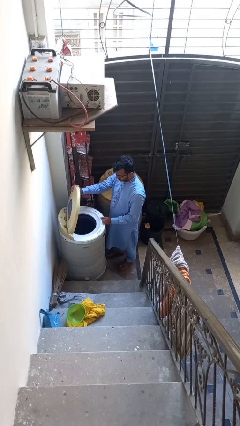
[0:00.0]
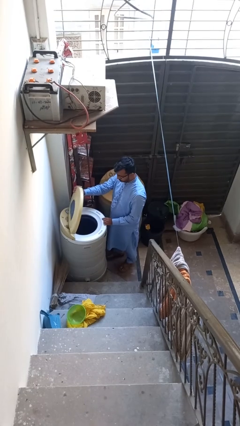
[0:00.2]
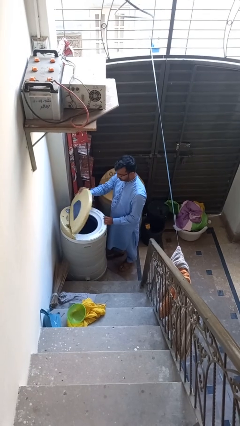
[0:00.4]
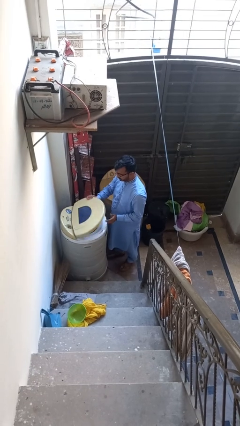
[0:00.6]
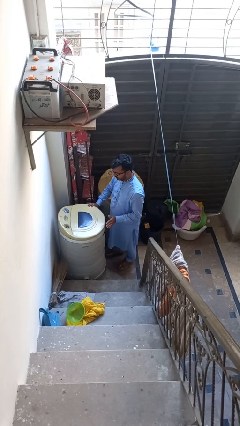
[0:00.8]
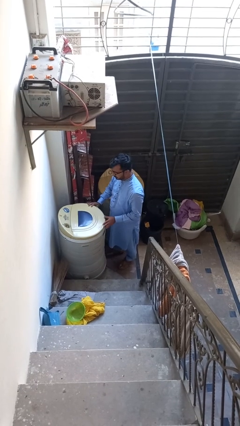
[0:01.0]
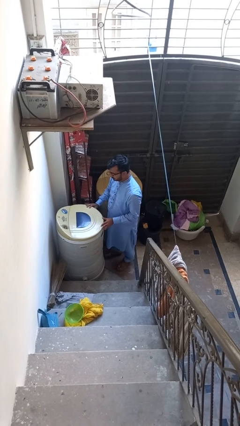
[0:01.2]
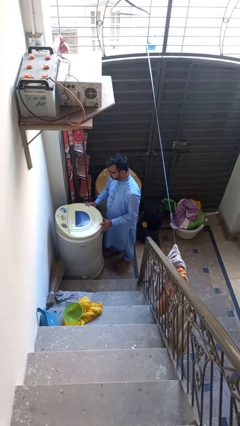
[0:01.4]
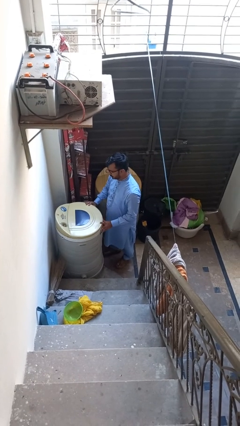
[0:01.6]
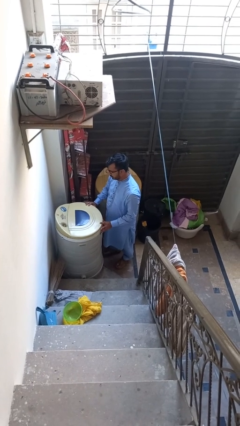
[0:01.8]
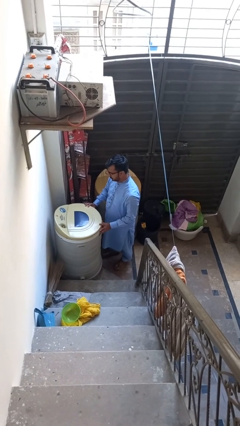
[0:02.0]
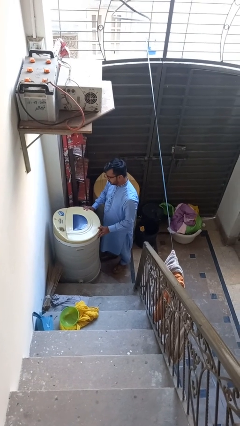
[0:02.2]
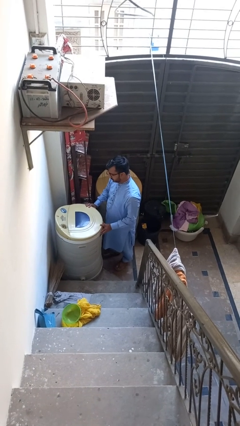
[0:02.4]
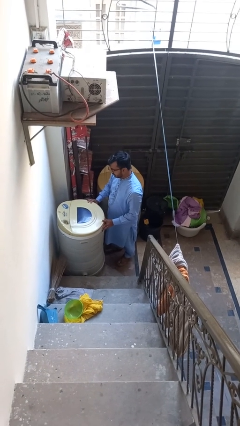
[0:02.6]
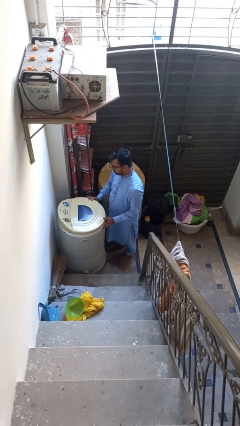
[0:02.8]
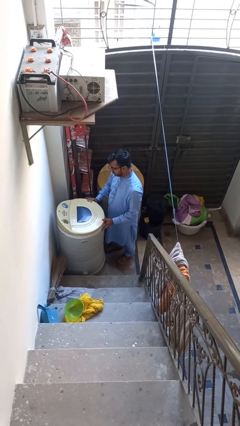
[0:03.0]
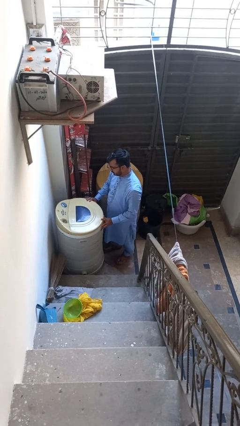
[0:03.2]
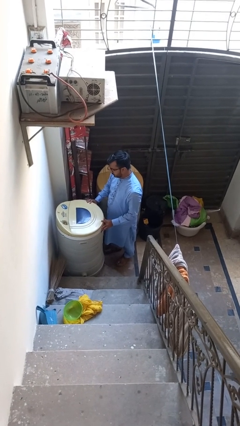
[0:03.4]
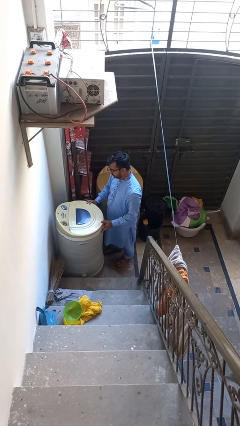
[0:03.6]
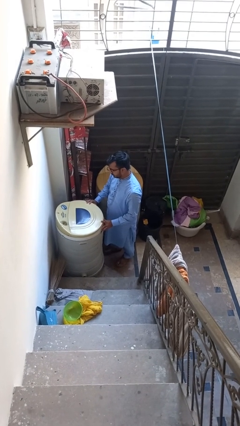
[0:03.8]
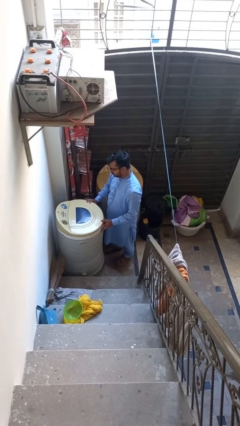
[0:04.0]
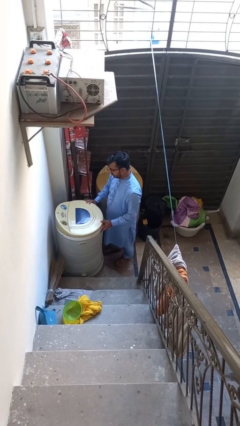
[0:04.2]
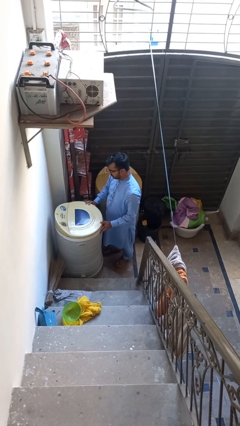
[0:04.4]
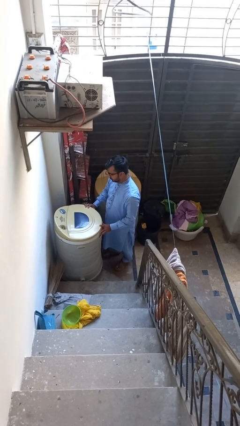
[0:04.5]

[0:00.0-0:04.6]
person closes clothes washer

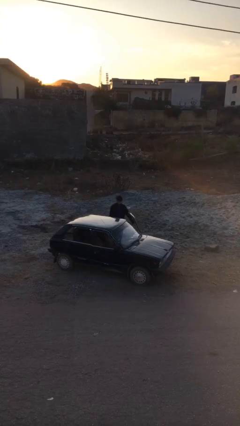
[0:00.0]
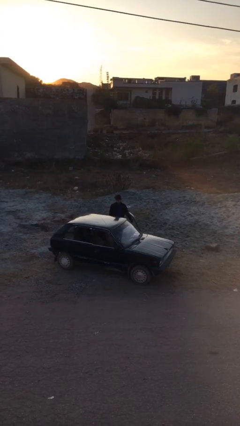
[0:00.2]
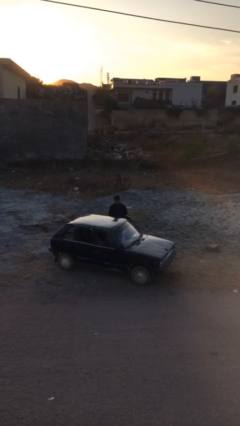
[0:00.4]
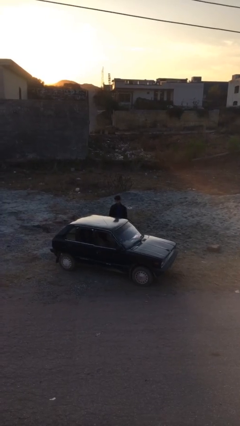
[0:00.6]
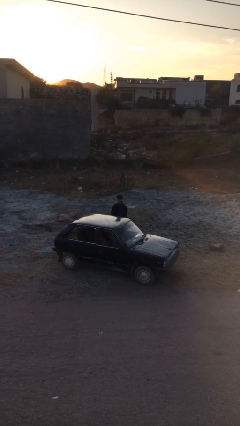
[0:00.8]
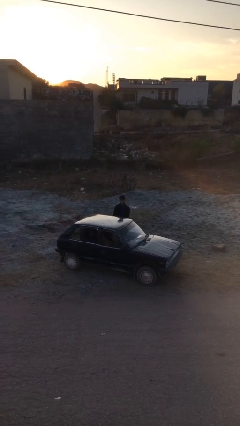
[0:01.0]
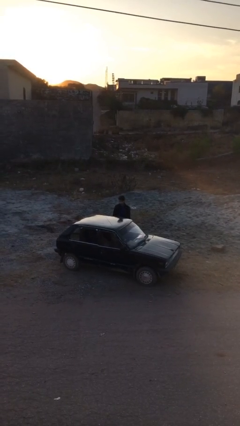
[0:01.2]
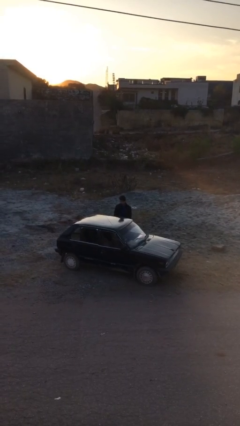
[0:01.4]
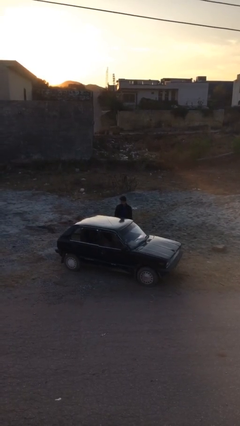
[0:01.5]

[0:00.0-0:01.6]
person closes car door

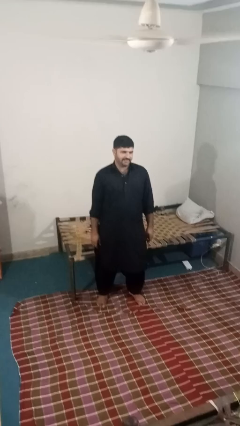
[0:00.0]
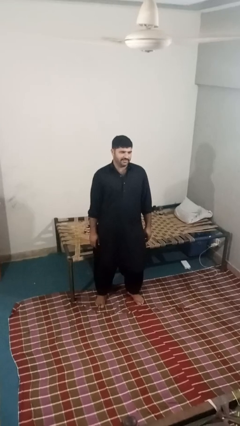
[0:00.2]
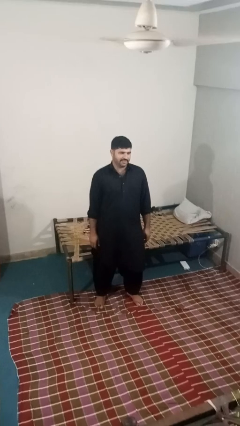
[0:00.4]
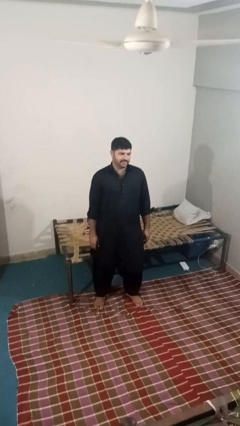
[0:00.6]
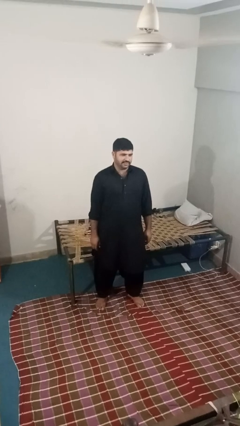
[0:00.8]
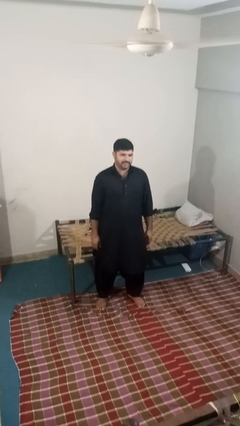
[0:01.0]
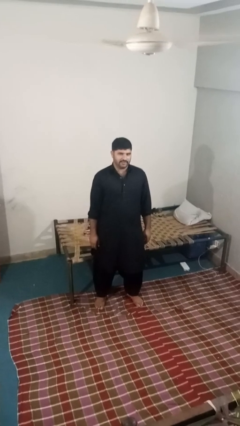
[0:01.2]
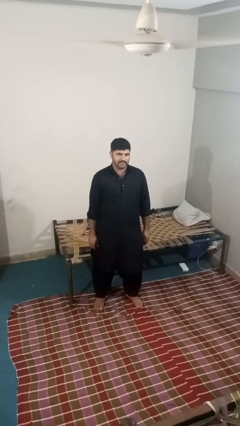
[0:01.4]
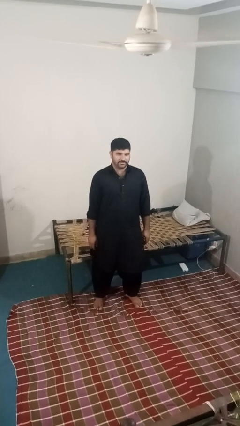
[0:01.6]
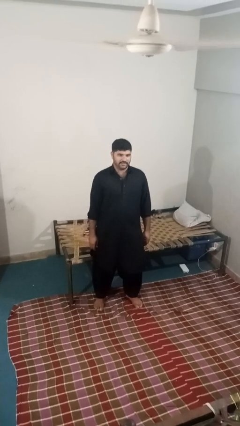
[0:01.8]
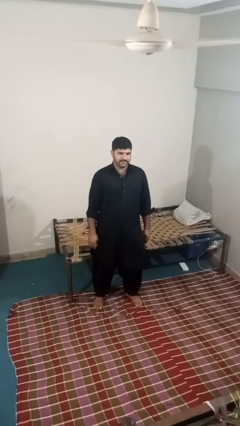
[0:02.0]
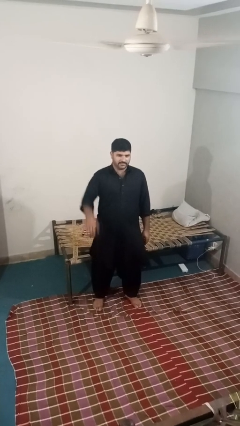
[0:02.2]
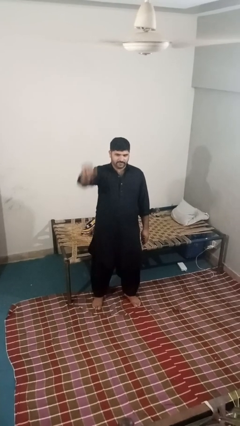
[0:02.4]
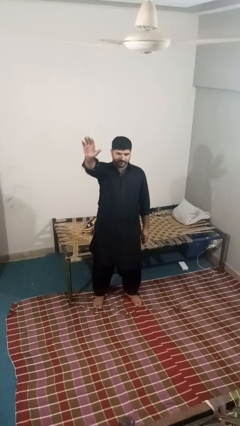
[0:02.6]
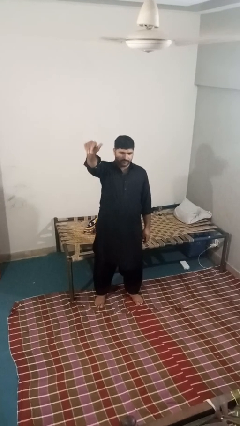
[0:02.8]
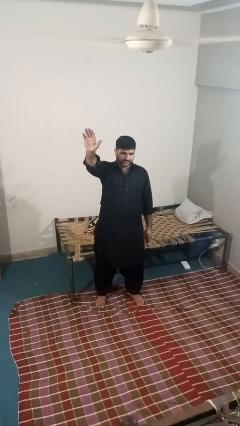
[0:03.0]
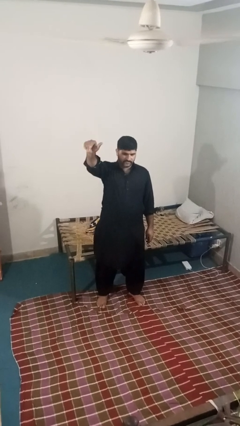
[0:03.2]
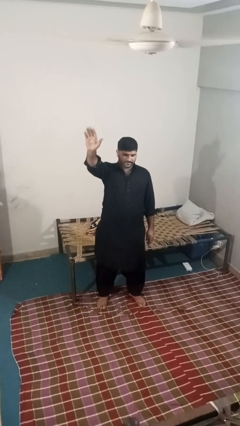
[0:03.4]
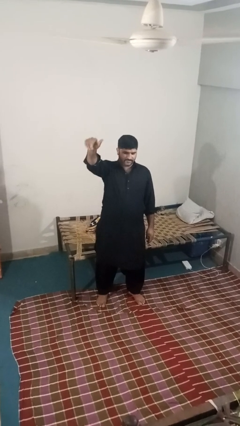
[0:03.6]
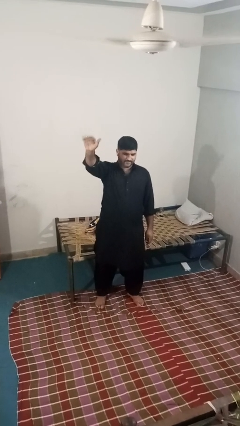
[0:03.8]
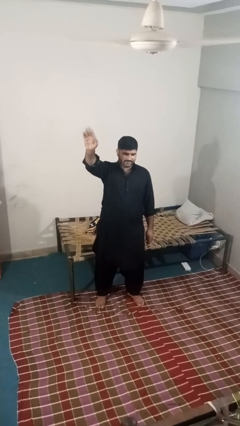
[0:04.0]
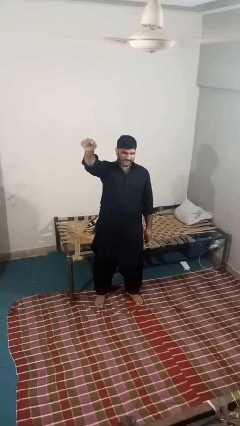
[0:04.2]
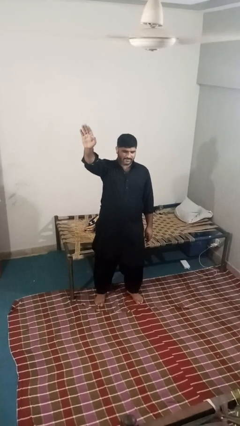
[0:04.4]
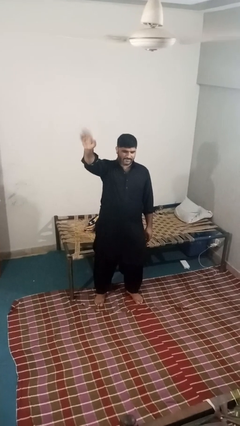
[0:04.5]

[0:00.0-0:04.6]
person gestures come here

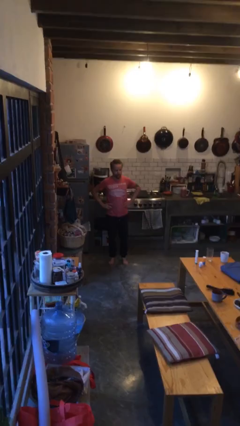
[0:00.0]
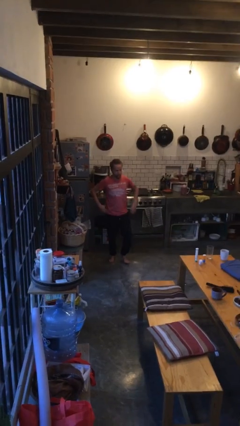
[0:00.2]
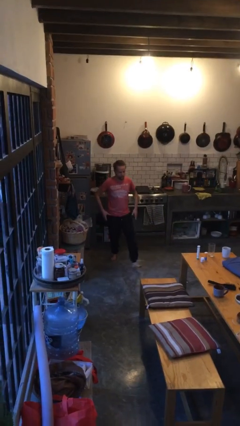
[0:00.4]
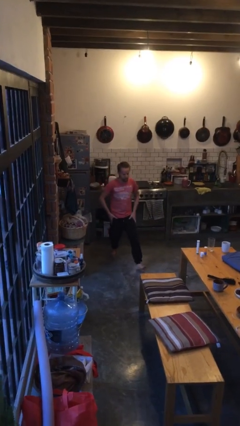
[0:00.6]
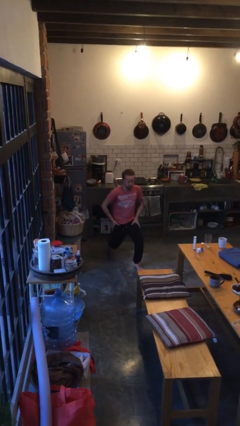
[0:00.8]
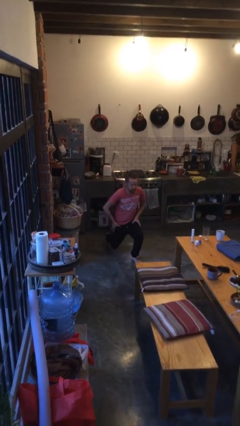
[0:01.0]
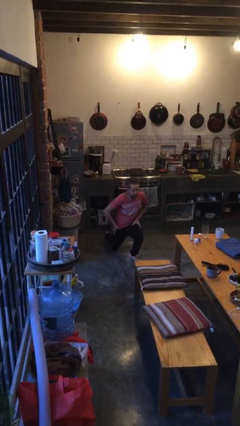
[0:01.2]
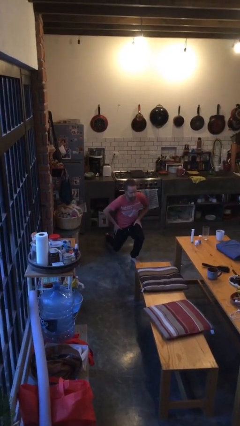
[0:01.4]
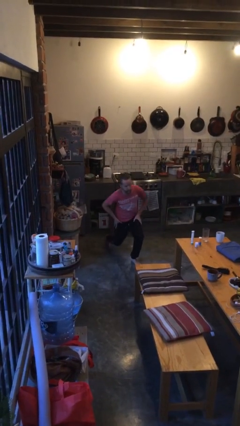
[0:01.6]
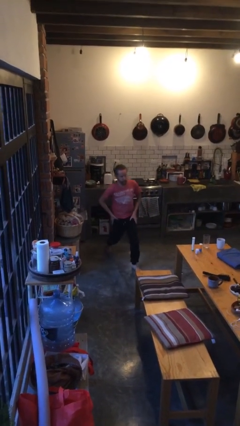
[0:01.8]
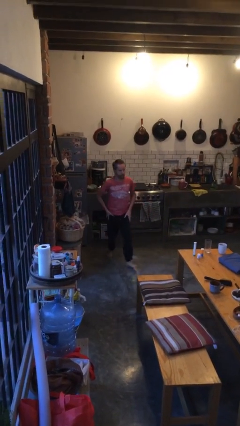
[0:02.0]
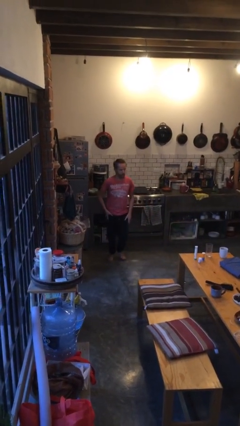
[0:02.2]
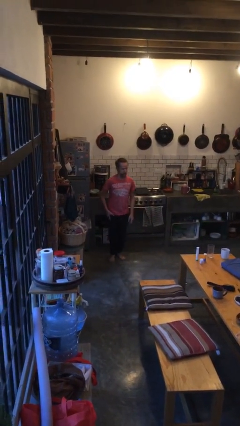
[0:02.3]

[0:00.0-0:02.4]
person exercises with lunges

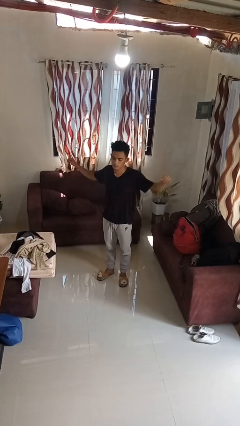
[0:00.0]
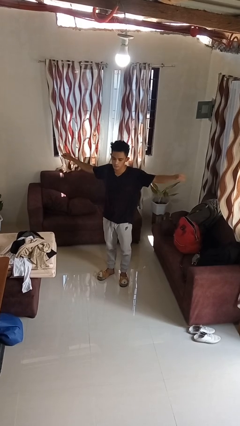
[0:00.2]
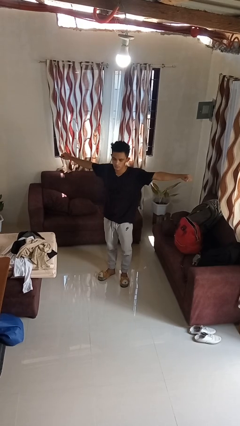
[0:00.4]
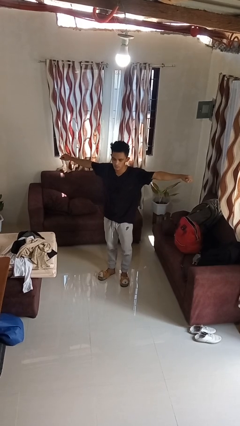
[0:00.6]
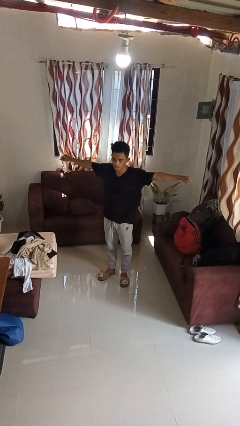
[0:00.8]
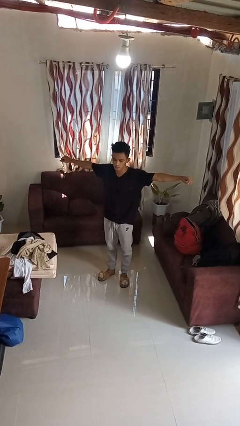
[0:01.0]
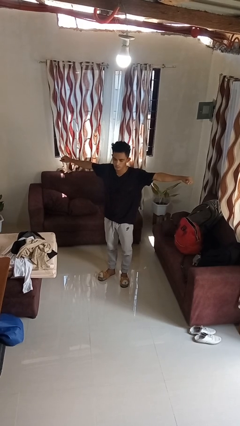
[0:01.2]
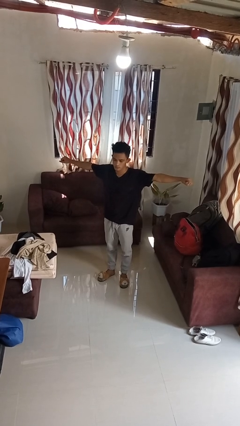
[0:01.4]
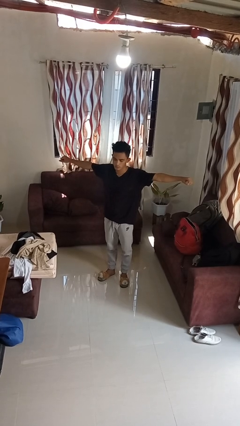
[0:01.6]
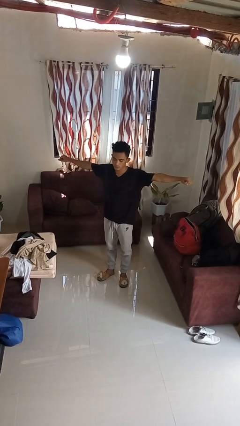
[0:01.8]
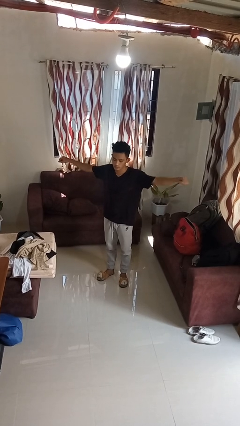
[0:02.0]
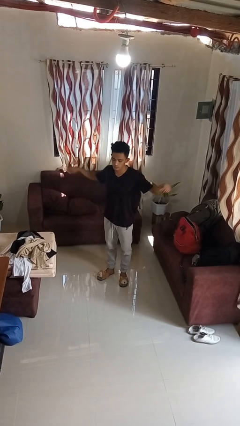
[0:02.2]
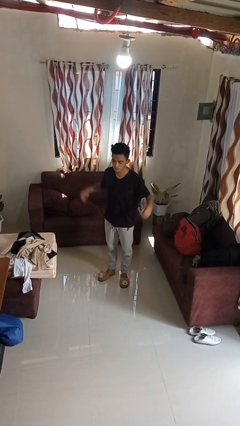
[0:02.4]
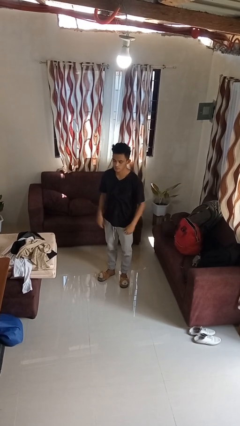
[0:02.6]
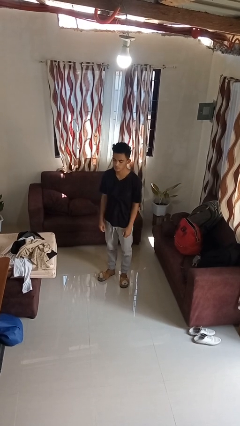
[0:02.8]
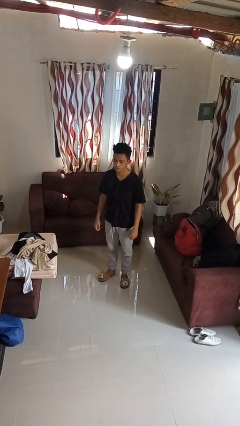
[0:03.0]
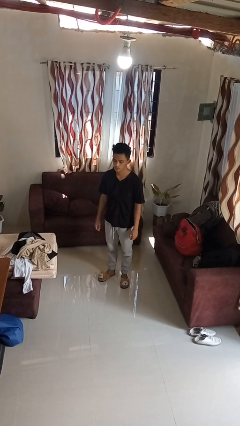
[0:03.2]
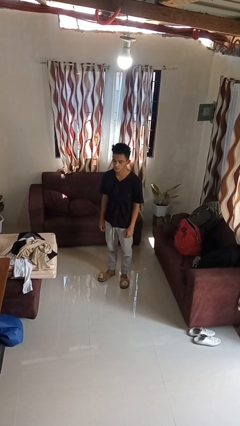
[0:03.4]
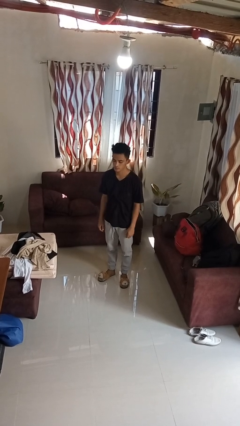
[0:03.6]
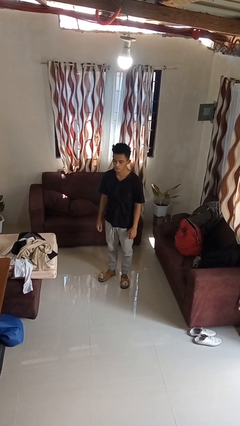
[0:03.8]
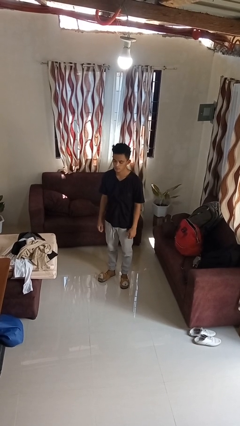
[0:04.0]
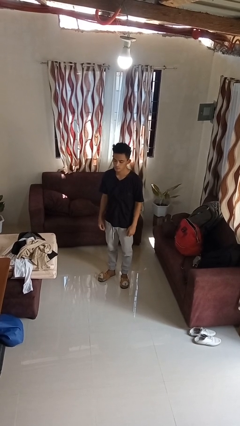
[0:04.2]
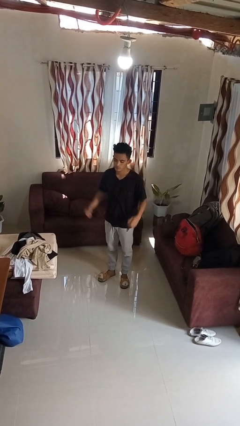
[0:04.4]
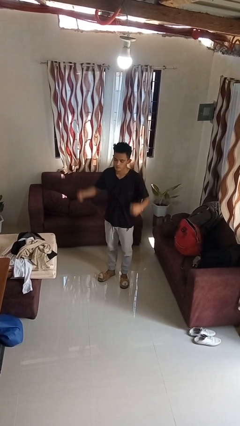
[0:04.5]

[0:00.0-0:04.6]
person stretches arms to side
